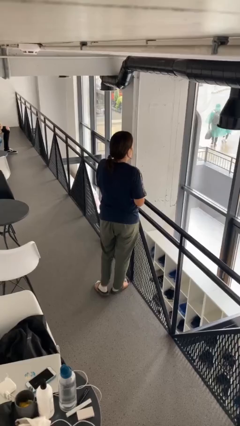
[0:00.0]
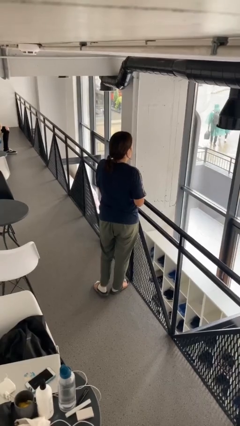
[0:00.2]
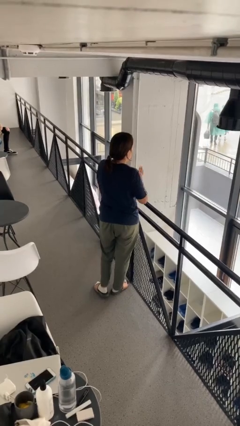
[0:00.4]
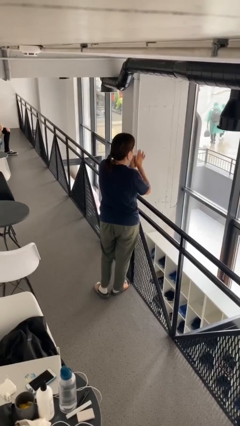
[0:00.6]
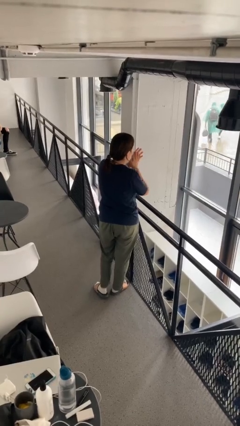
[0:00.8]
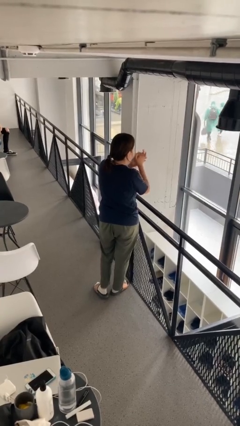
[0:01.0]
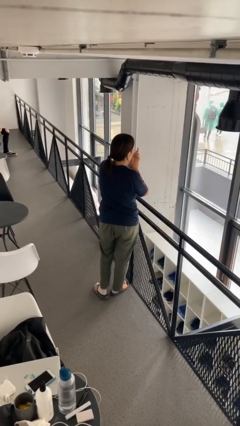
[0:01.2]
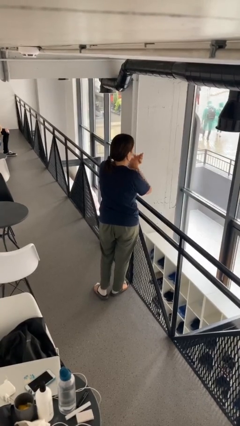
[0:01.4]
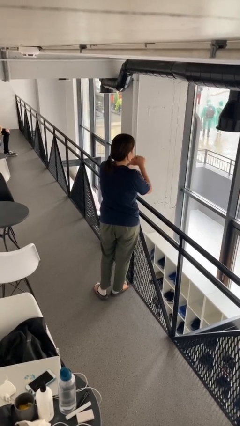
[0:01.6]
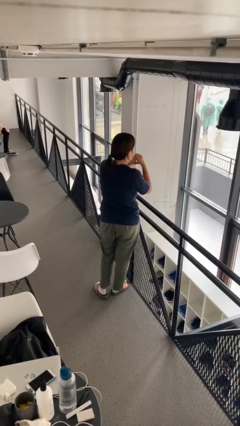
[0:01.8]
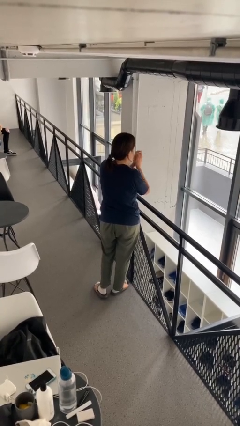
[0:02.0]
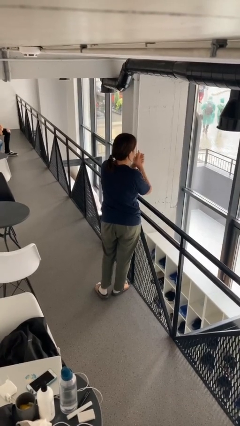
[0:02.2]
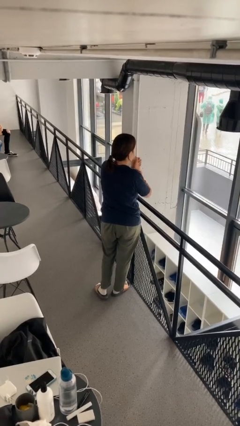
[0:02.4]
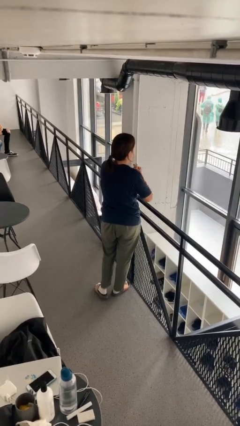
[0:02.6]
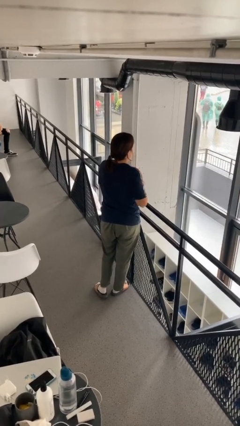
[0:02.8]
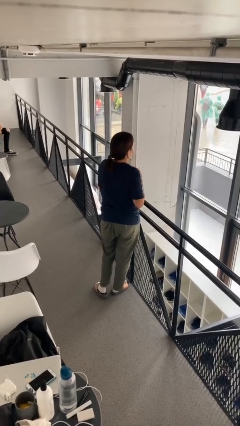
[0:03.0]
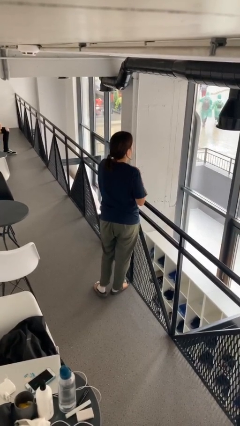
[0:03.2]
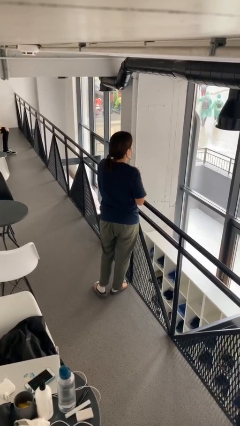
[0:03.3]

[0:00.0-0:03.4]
person blows into hands

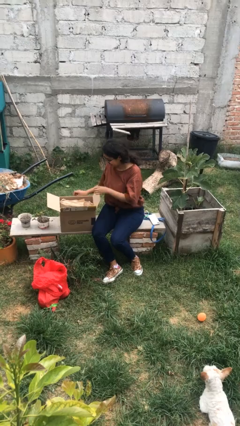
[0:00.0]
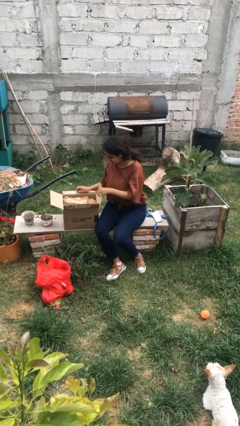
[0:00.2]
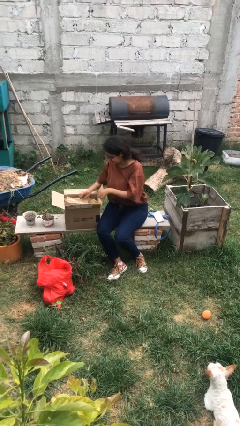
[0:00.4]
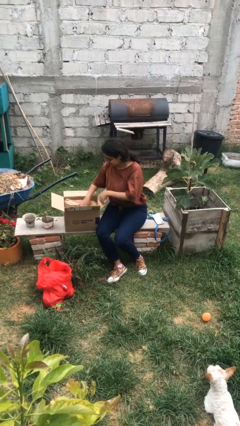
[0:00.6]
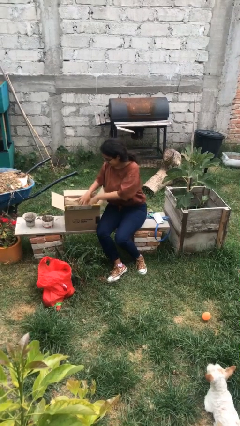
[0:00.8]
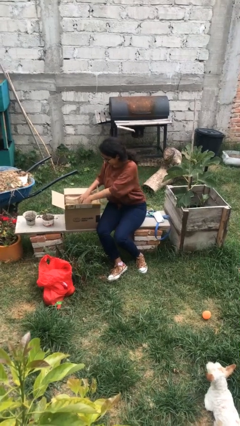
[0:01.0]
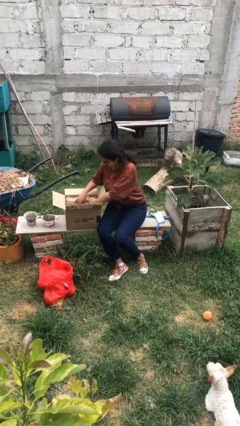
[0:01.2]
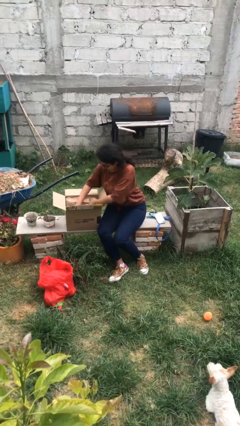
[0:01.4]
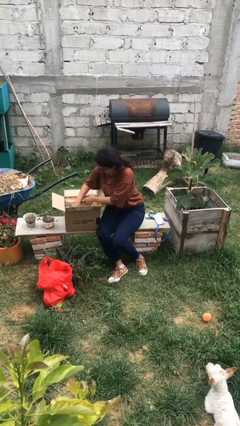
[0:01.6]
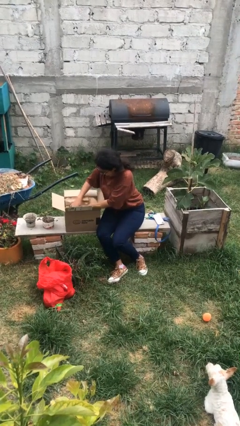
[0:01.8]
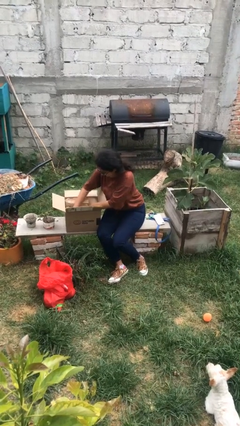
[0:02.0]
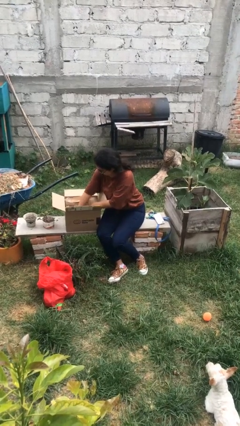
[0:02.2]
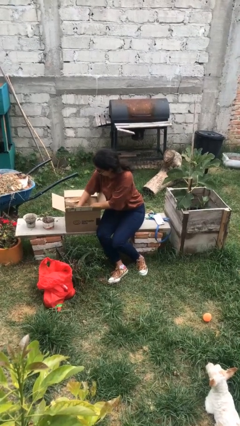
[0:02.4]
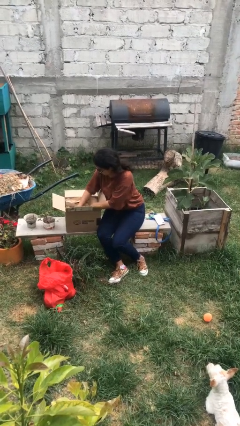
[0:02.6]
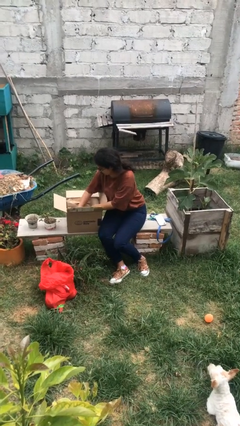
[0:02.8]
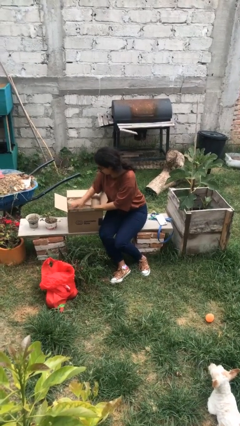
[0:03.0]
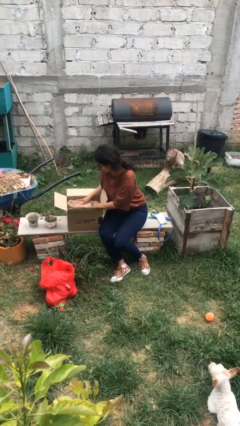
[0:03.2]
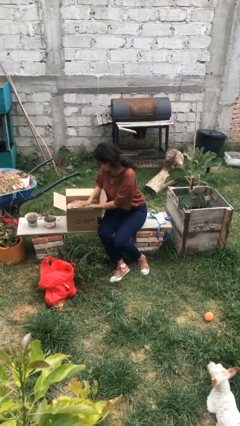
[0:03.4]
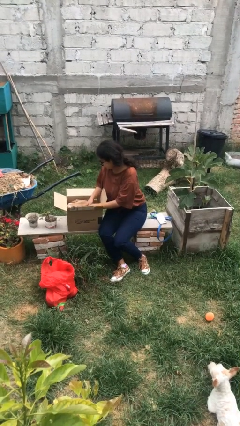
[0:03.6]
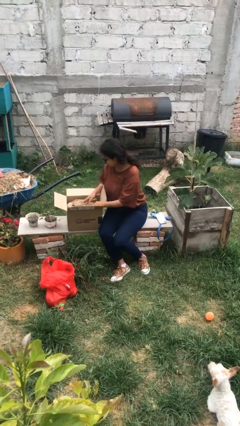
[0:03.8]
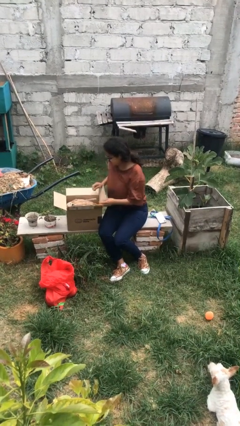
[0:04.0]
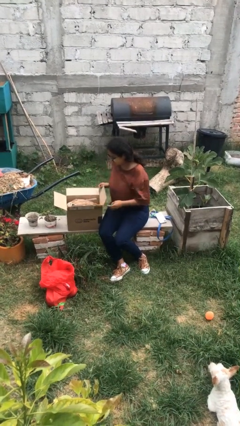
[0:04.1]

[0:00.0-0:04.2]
person searches in box

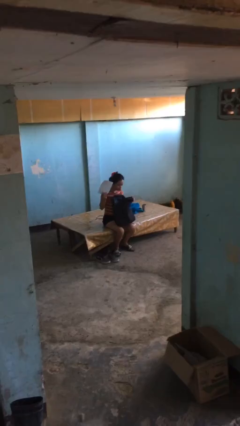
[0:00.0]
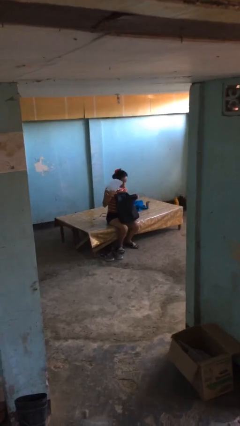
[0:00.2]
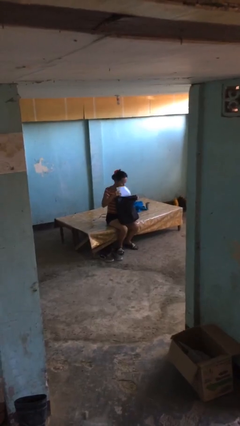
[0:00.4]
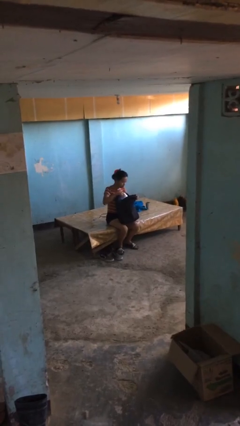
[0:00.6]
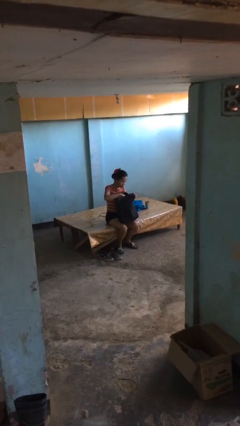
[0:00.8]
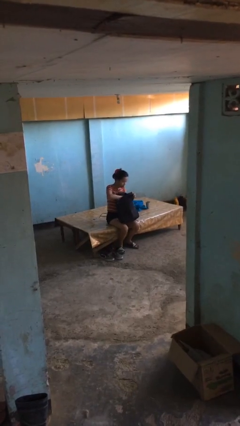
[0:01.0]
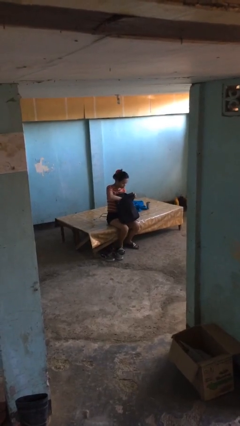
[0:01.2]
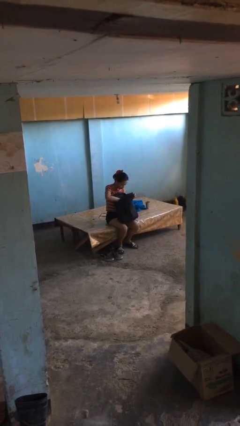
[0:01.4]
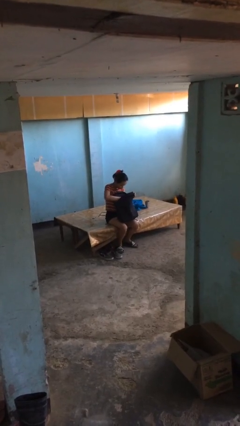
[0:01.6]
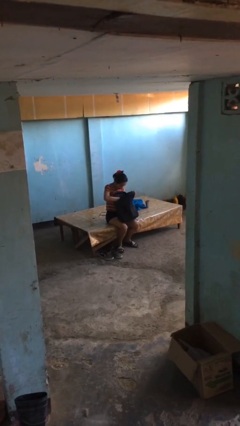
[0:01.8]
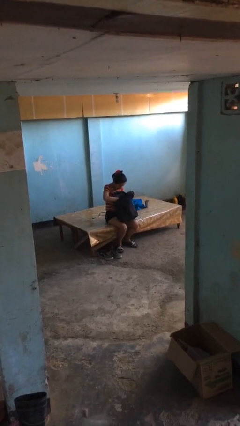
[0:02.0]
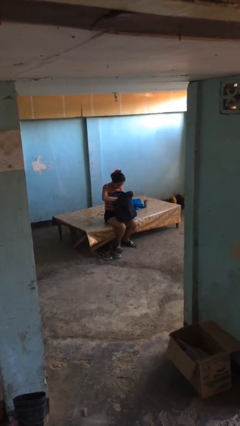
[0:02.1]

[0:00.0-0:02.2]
person puts object into backpack

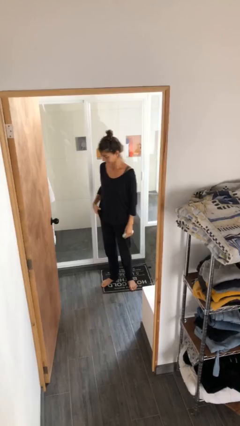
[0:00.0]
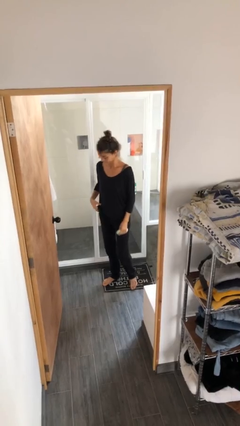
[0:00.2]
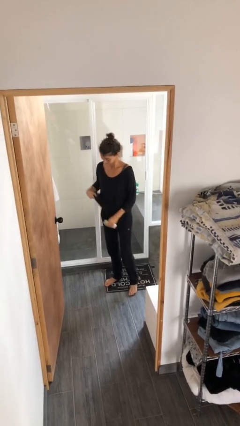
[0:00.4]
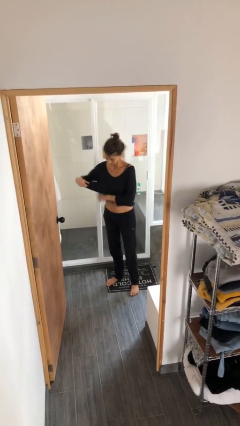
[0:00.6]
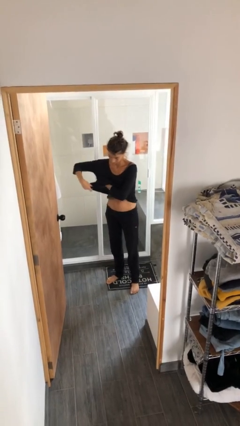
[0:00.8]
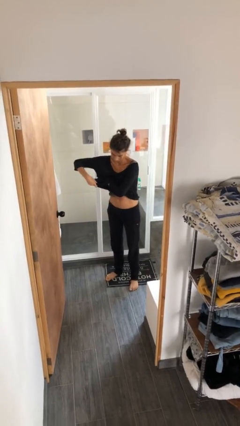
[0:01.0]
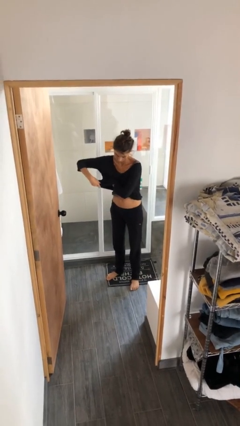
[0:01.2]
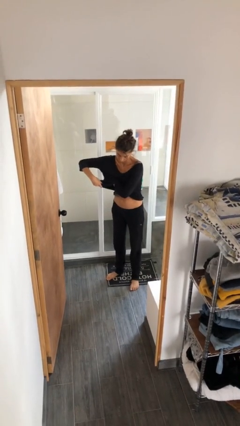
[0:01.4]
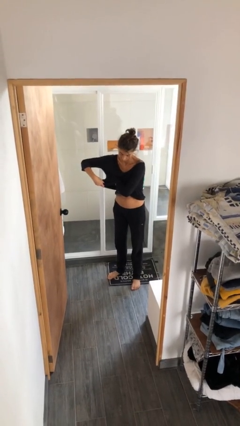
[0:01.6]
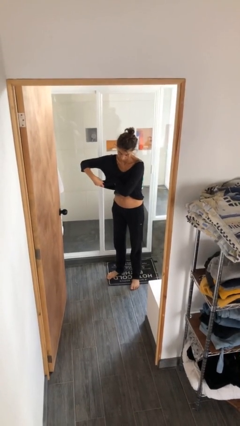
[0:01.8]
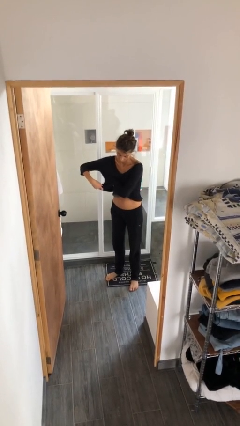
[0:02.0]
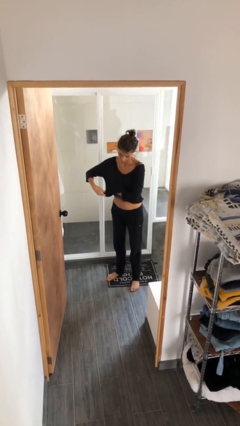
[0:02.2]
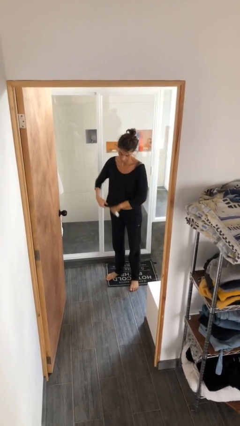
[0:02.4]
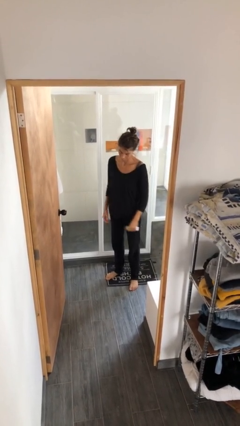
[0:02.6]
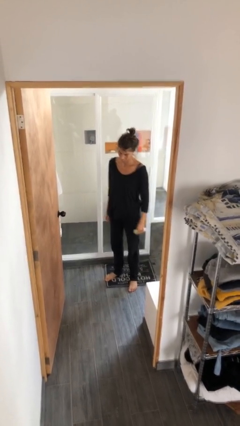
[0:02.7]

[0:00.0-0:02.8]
person applies deodorant

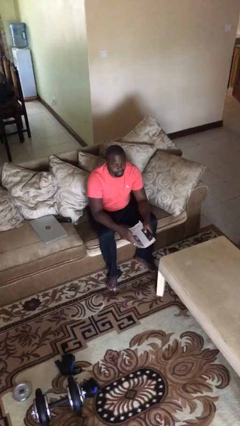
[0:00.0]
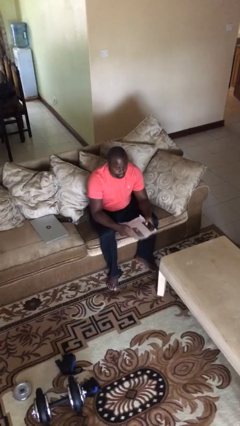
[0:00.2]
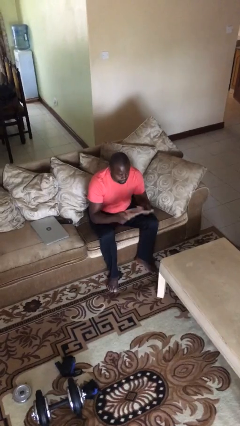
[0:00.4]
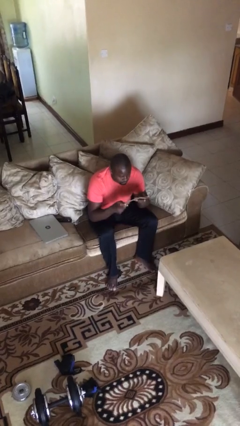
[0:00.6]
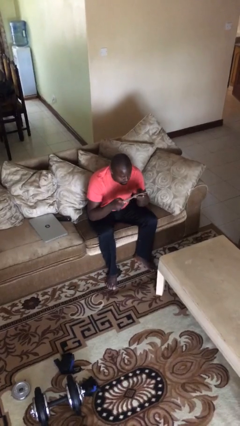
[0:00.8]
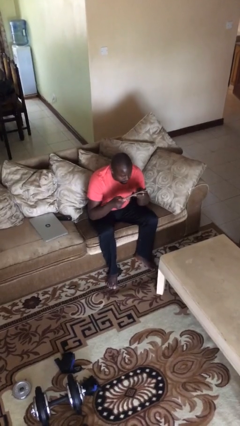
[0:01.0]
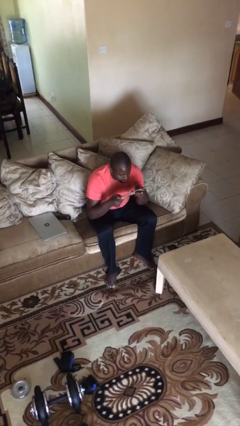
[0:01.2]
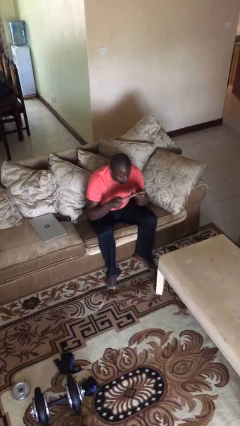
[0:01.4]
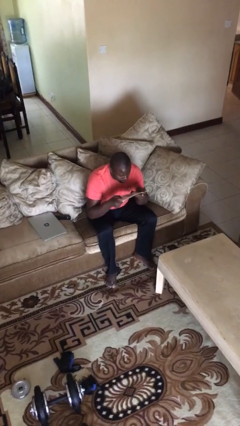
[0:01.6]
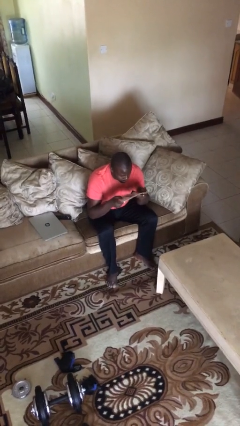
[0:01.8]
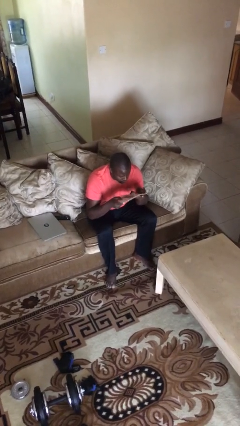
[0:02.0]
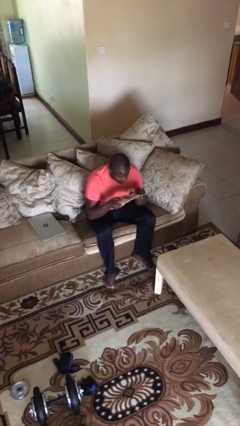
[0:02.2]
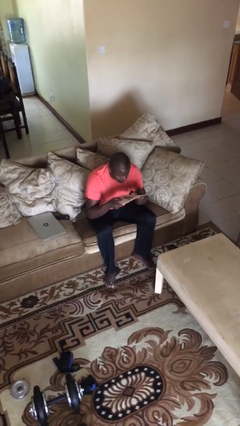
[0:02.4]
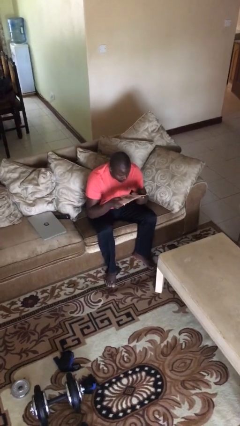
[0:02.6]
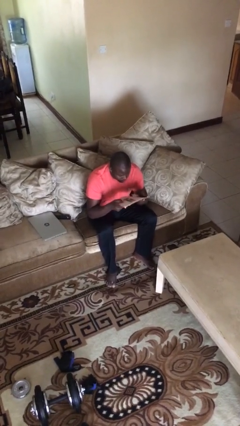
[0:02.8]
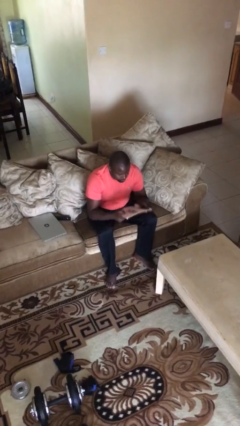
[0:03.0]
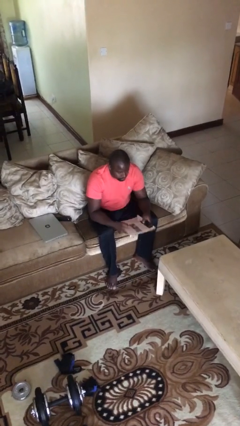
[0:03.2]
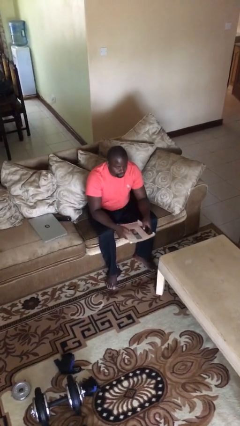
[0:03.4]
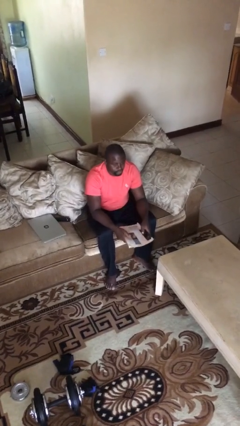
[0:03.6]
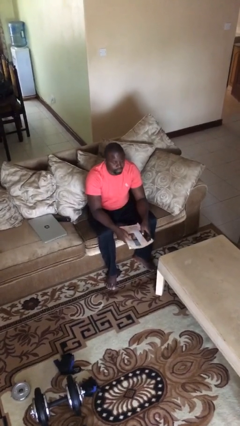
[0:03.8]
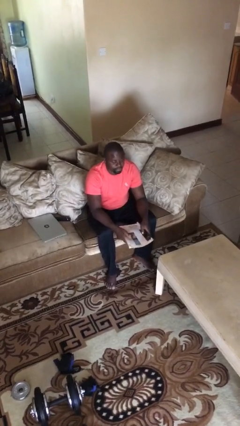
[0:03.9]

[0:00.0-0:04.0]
person reads document

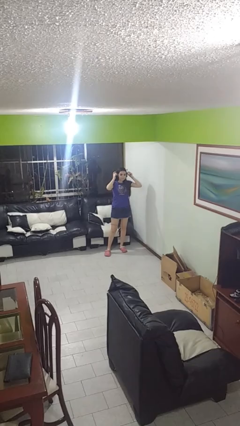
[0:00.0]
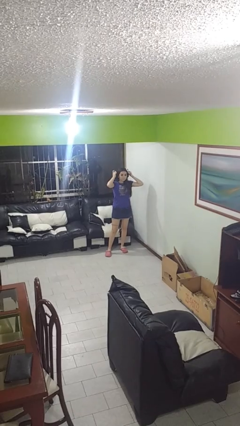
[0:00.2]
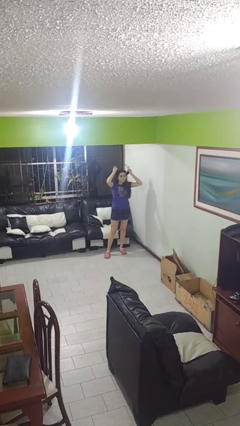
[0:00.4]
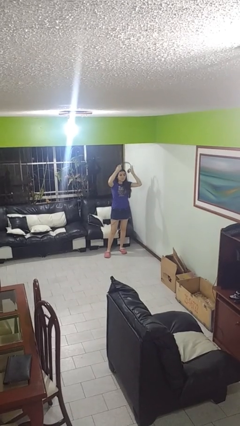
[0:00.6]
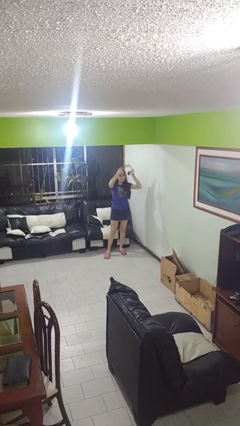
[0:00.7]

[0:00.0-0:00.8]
person takes off headphones
